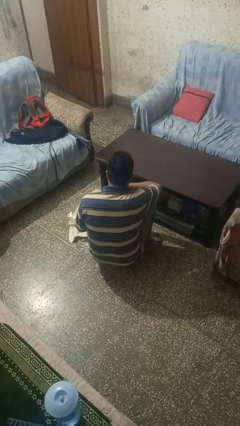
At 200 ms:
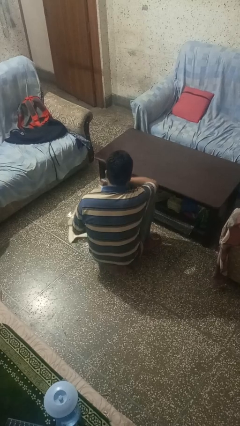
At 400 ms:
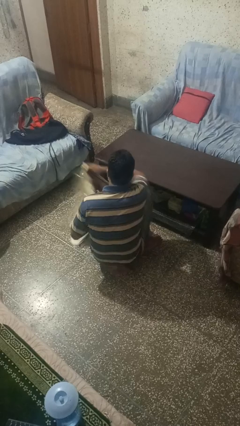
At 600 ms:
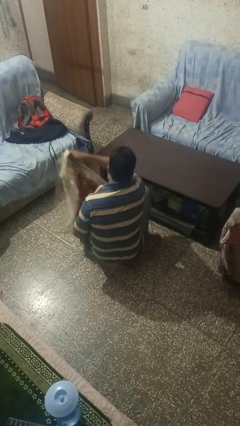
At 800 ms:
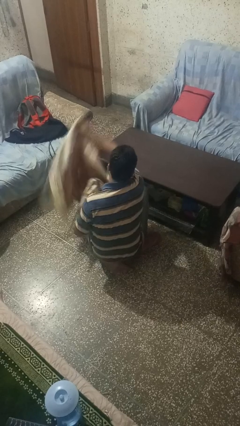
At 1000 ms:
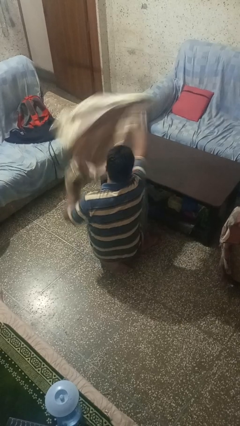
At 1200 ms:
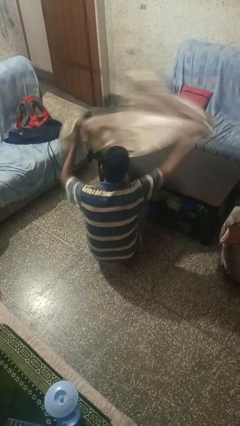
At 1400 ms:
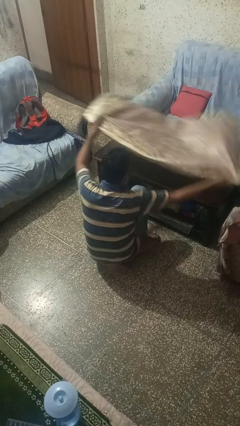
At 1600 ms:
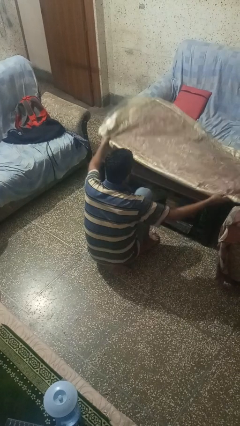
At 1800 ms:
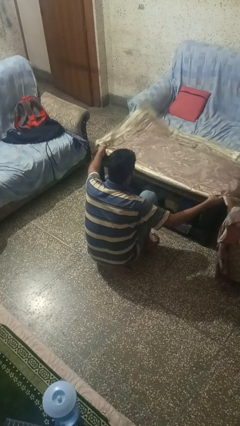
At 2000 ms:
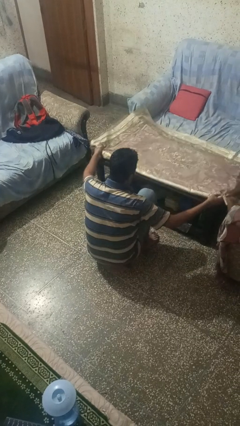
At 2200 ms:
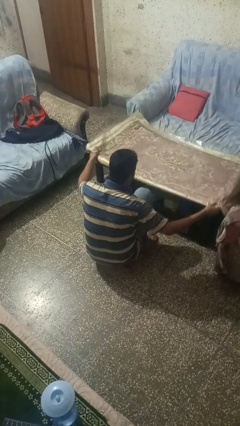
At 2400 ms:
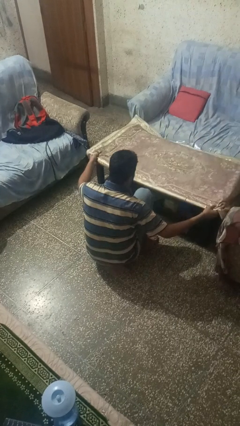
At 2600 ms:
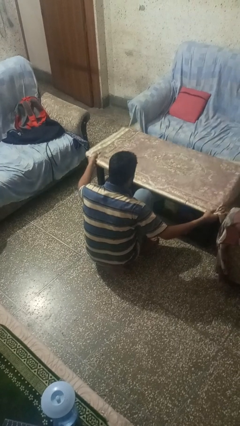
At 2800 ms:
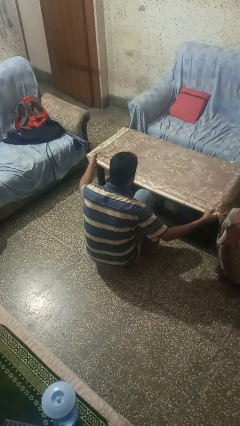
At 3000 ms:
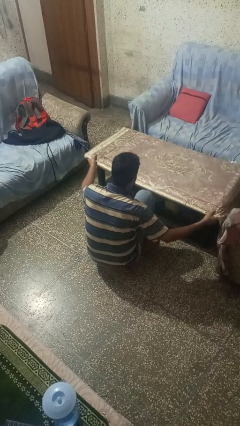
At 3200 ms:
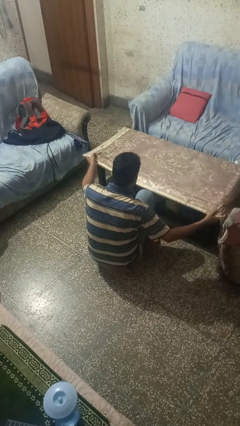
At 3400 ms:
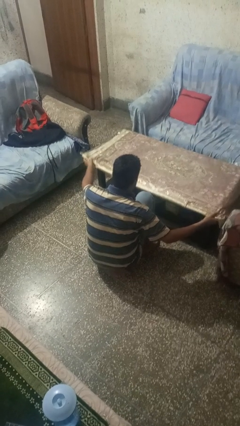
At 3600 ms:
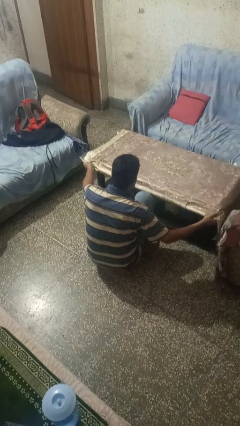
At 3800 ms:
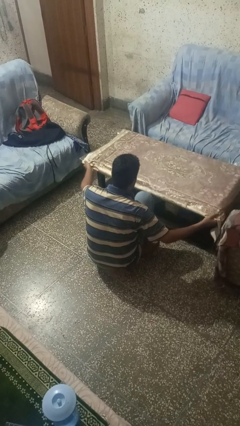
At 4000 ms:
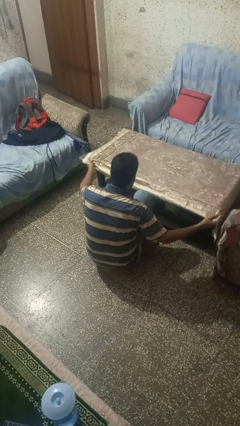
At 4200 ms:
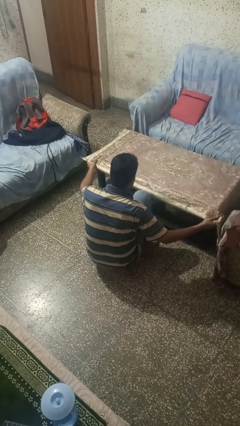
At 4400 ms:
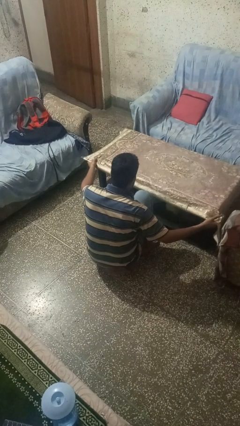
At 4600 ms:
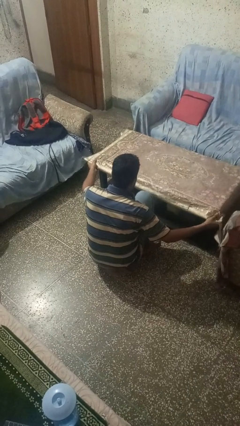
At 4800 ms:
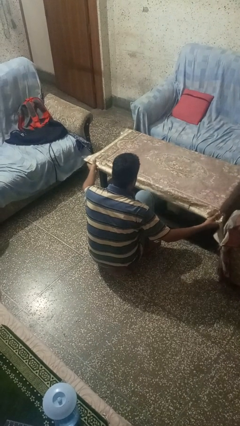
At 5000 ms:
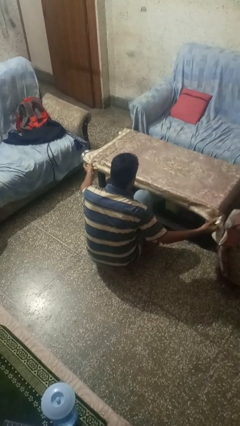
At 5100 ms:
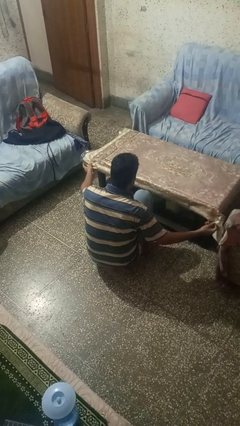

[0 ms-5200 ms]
person spreads tablecloth

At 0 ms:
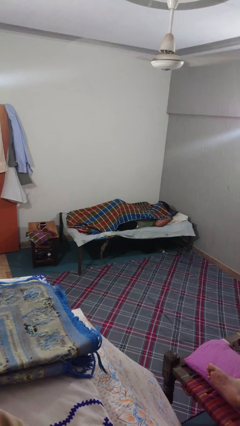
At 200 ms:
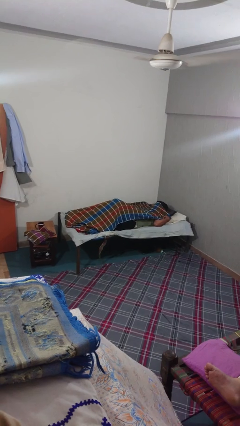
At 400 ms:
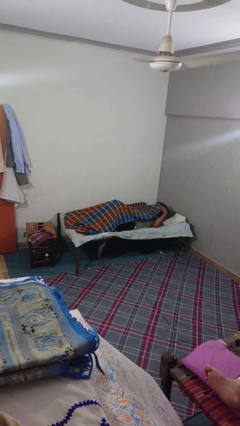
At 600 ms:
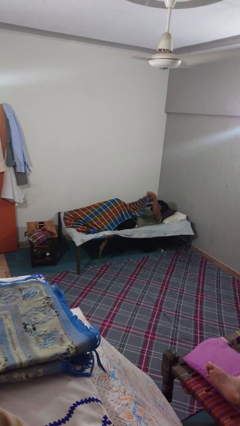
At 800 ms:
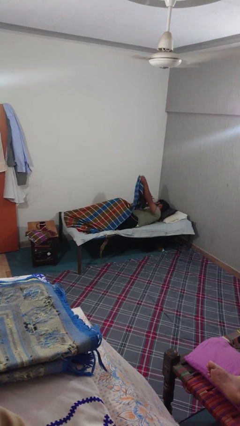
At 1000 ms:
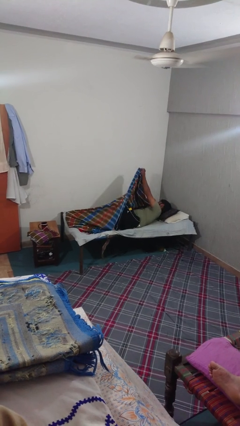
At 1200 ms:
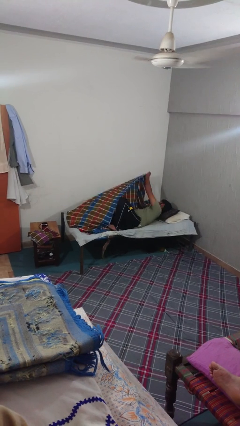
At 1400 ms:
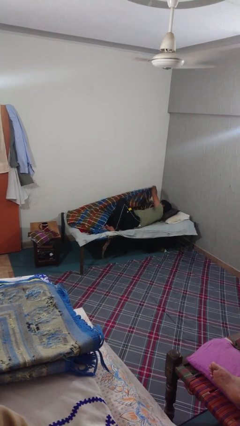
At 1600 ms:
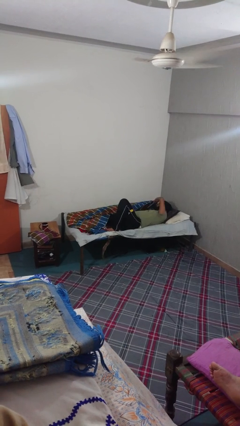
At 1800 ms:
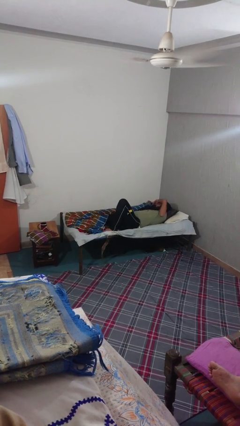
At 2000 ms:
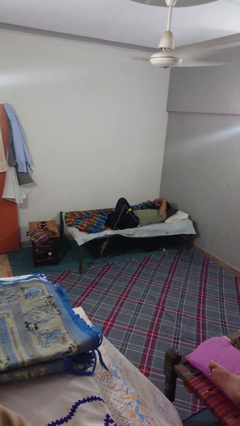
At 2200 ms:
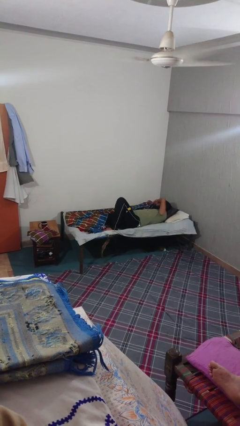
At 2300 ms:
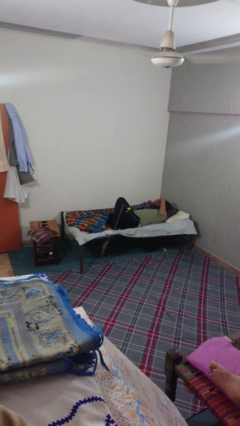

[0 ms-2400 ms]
person uncovers with bedsheets

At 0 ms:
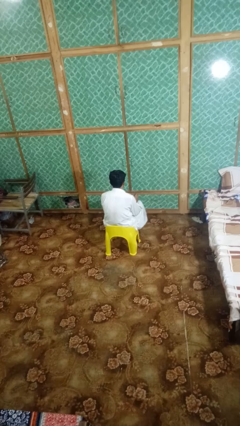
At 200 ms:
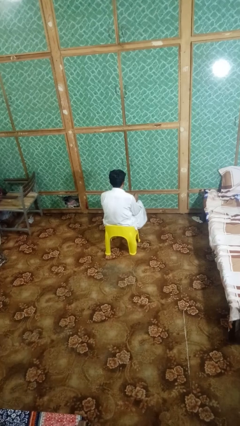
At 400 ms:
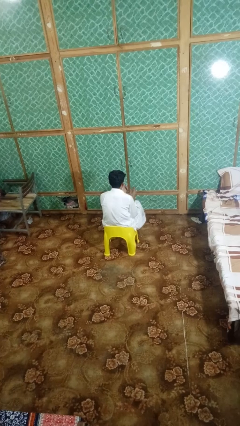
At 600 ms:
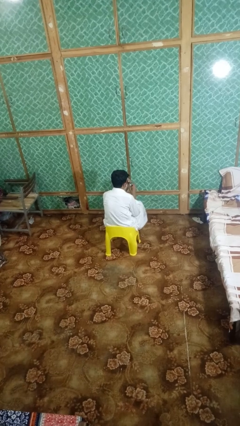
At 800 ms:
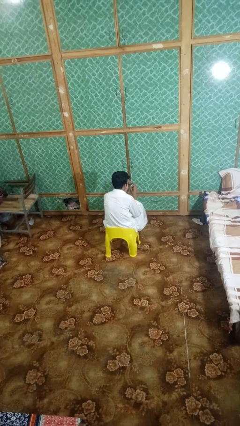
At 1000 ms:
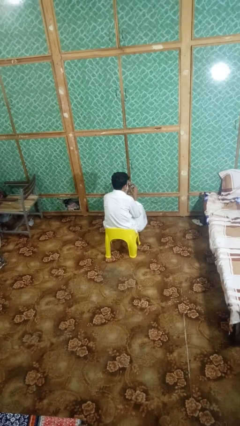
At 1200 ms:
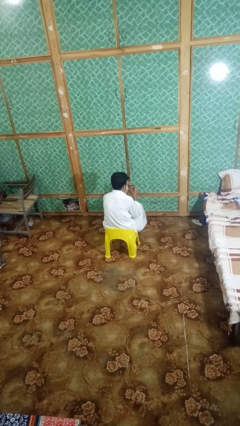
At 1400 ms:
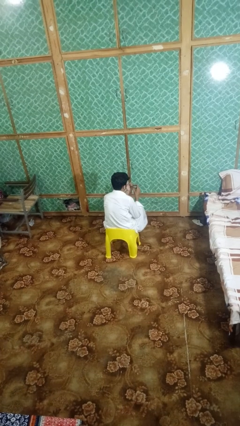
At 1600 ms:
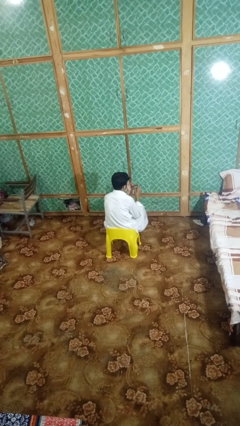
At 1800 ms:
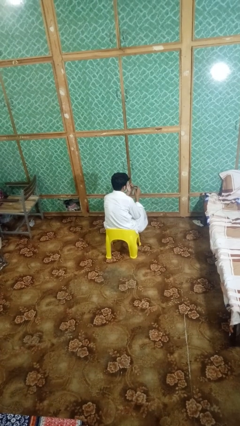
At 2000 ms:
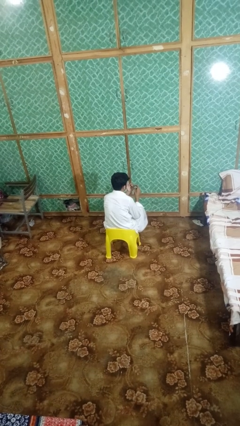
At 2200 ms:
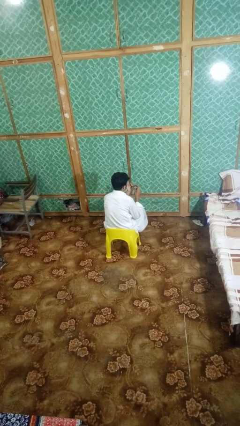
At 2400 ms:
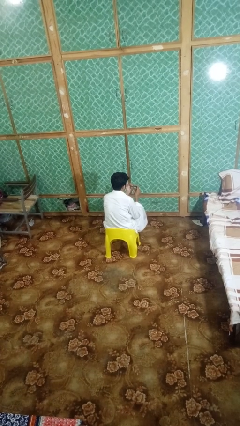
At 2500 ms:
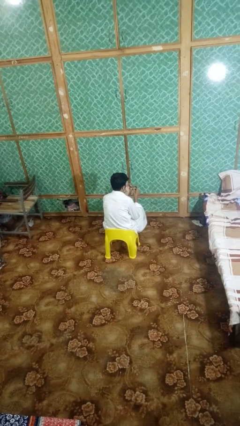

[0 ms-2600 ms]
person clips fingernails

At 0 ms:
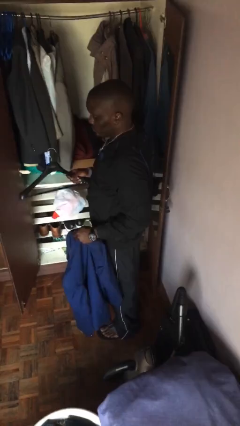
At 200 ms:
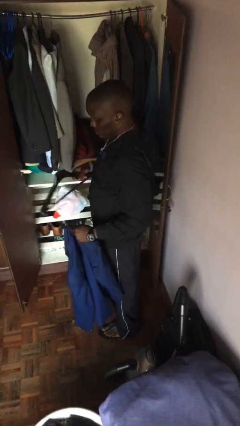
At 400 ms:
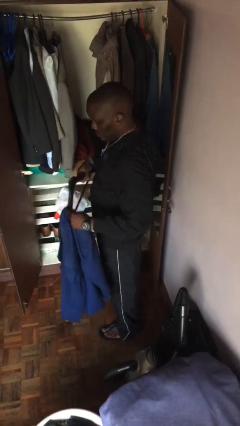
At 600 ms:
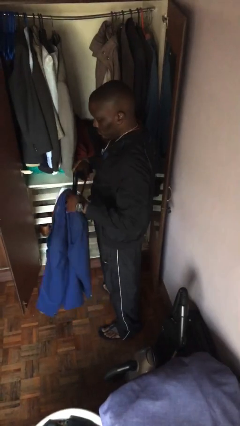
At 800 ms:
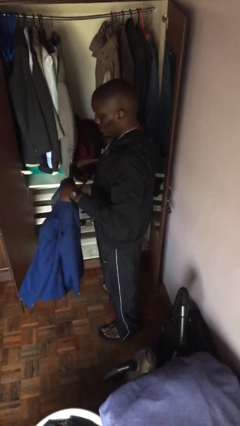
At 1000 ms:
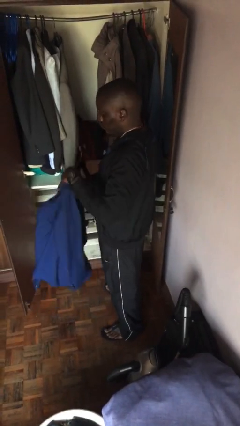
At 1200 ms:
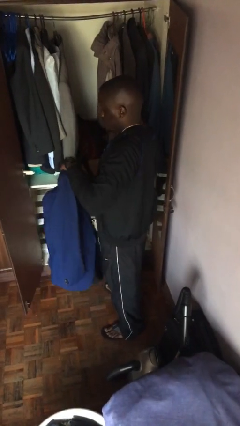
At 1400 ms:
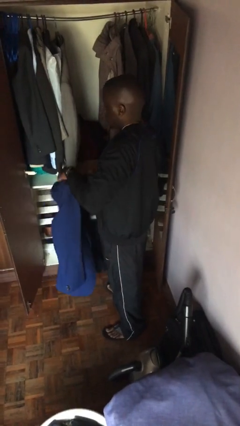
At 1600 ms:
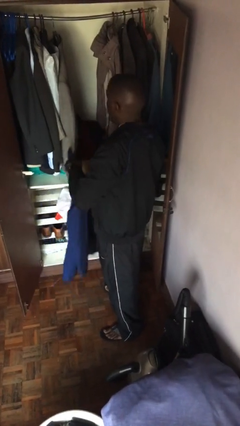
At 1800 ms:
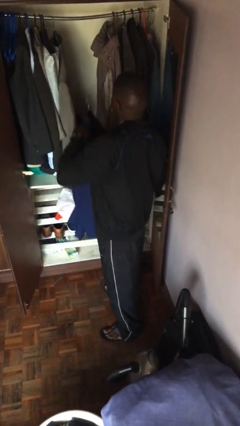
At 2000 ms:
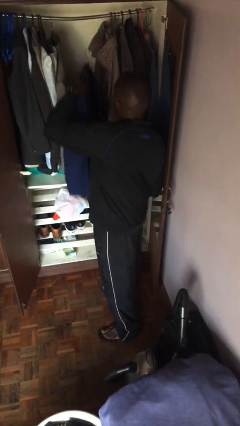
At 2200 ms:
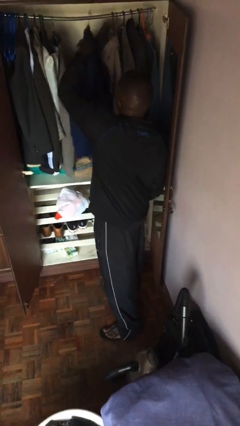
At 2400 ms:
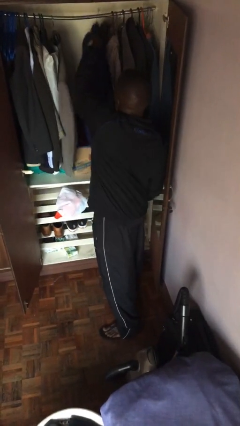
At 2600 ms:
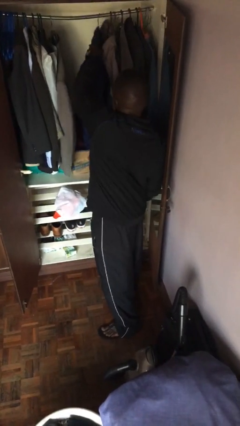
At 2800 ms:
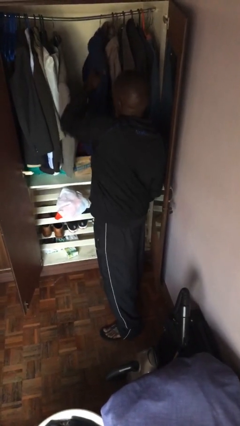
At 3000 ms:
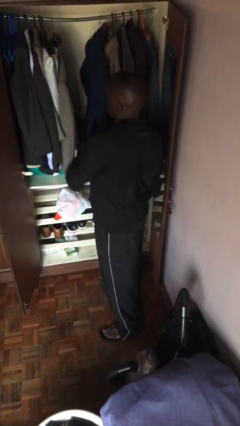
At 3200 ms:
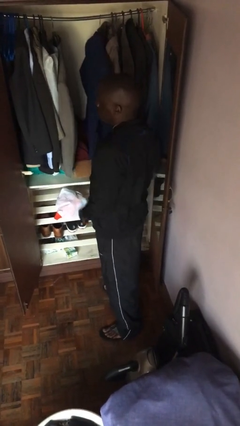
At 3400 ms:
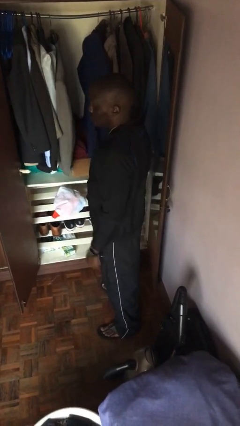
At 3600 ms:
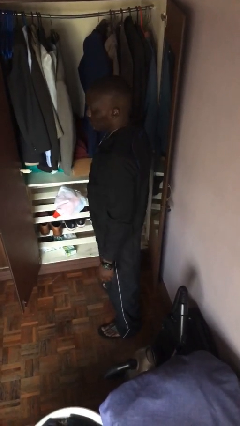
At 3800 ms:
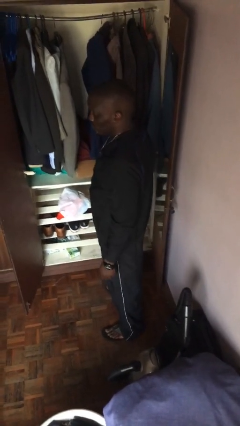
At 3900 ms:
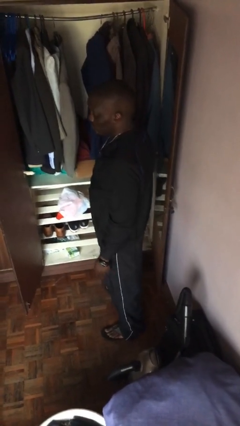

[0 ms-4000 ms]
person puts clothes into closet

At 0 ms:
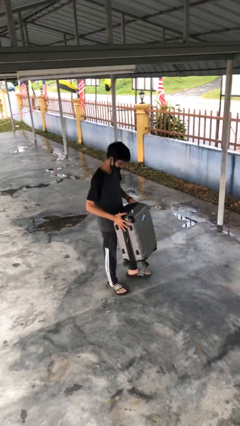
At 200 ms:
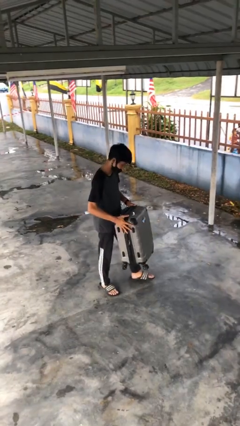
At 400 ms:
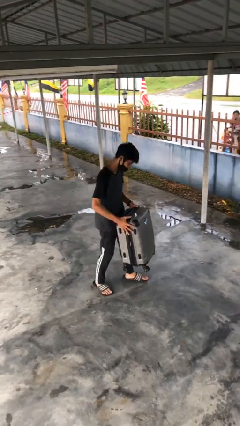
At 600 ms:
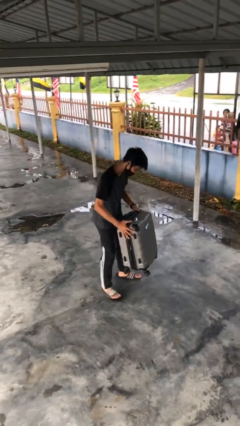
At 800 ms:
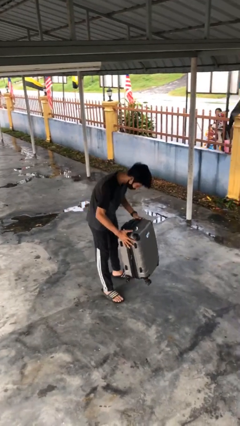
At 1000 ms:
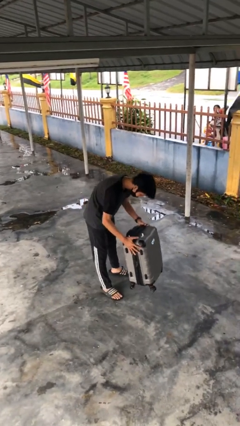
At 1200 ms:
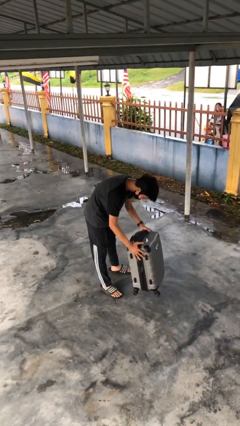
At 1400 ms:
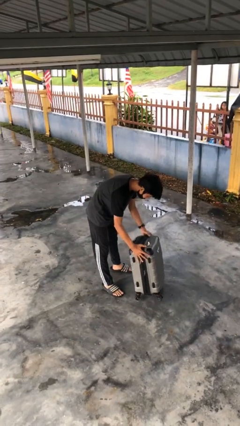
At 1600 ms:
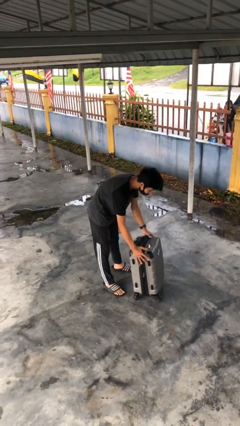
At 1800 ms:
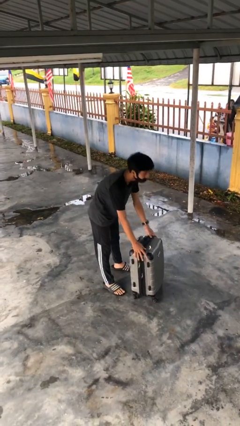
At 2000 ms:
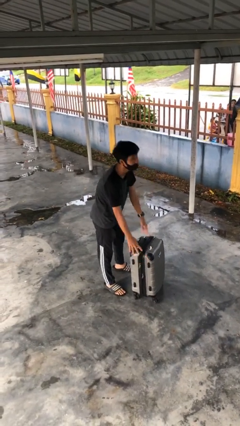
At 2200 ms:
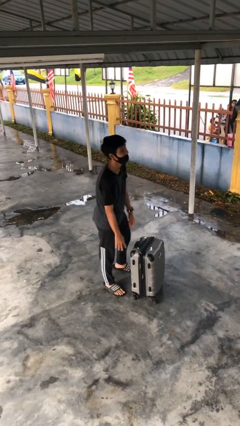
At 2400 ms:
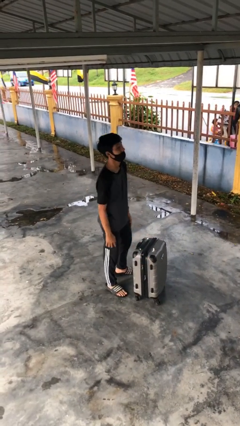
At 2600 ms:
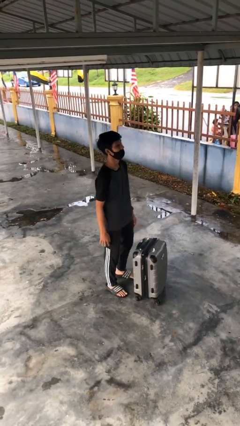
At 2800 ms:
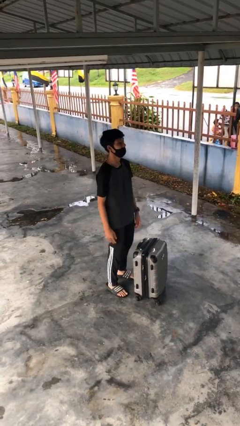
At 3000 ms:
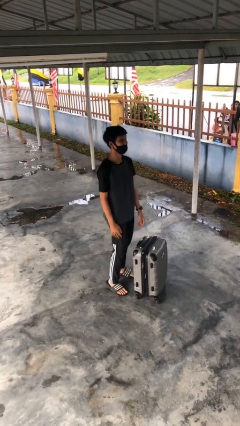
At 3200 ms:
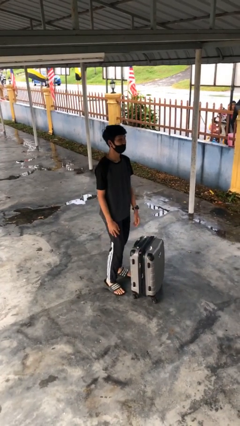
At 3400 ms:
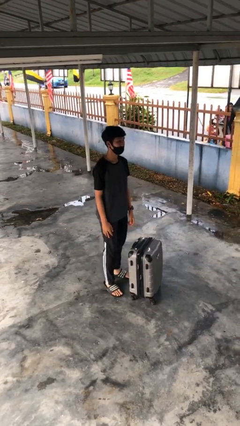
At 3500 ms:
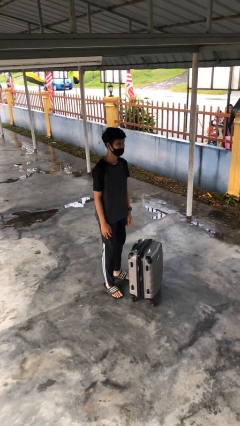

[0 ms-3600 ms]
person puts down object on floor
